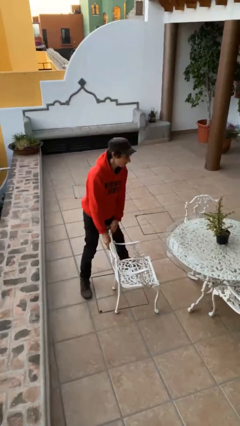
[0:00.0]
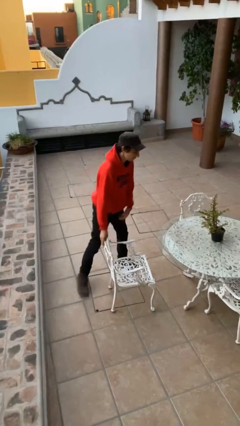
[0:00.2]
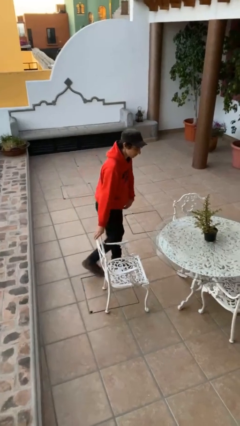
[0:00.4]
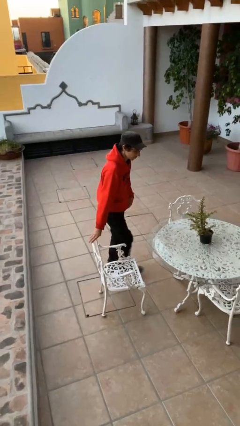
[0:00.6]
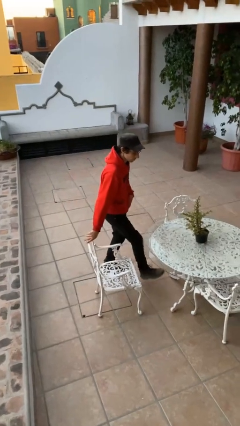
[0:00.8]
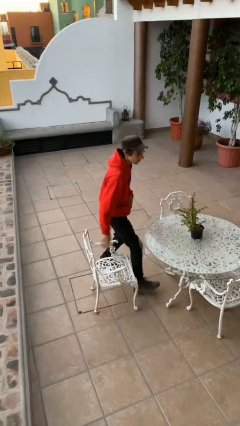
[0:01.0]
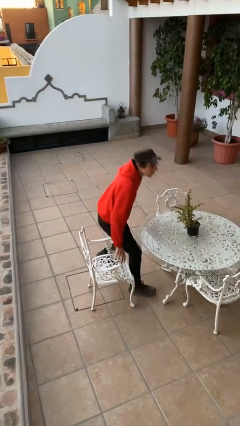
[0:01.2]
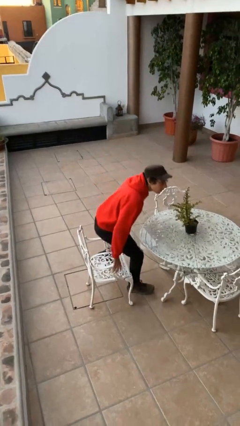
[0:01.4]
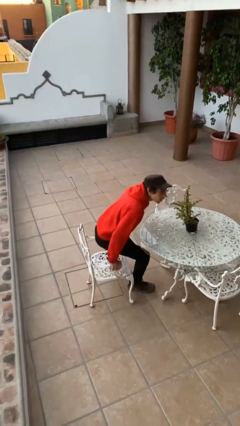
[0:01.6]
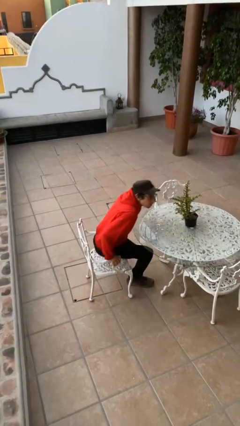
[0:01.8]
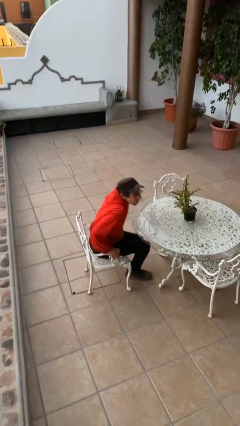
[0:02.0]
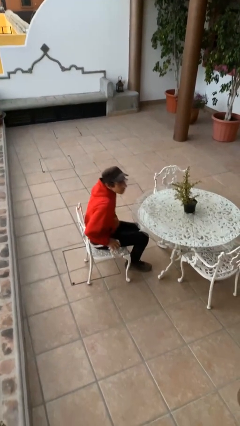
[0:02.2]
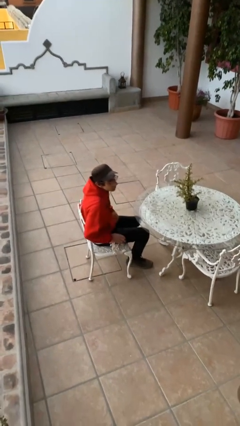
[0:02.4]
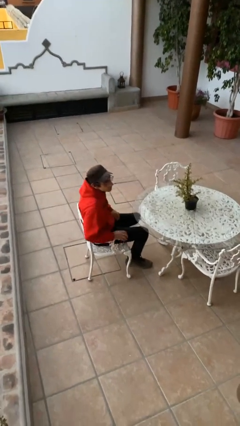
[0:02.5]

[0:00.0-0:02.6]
person sits down

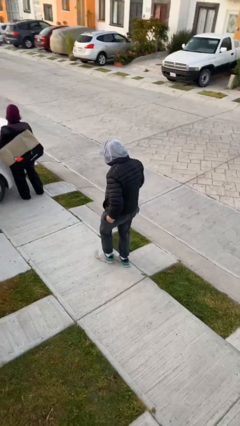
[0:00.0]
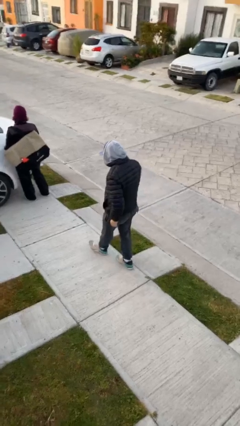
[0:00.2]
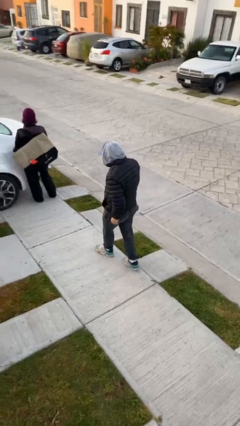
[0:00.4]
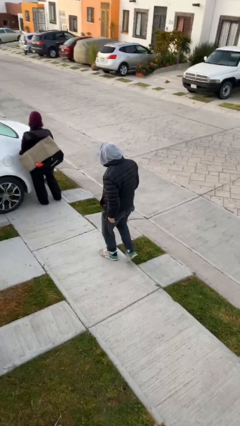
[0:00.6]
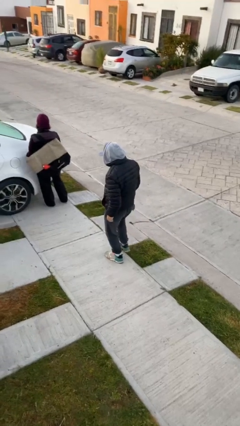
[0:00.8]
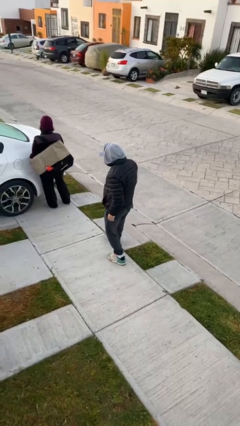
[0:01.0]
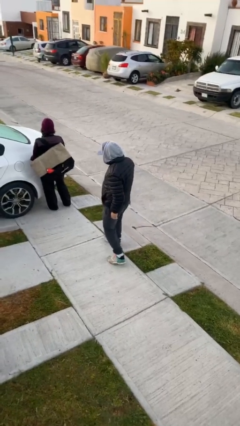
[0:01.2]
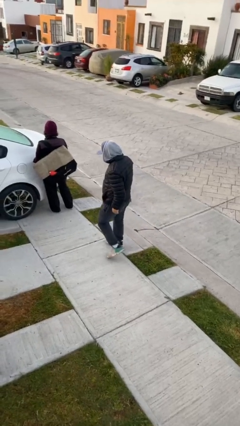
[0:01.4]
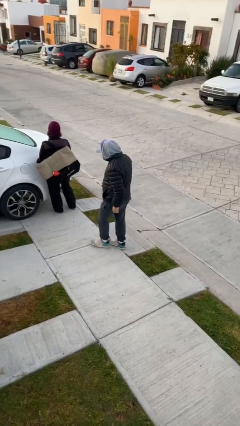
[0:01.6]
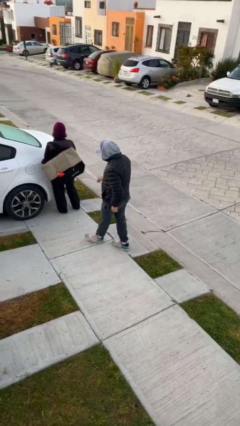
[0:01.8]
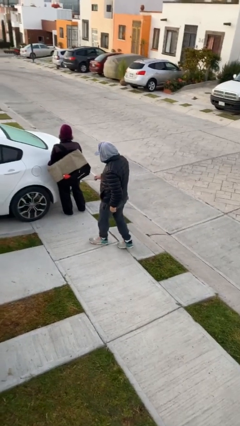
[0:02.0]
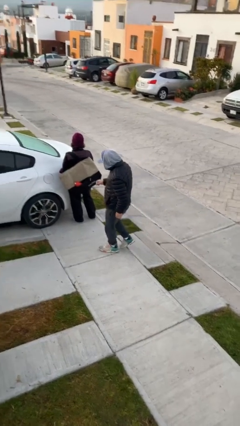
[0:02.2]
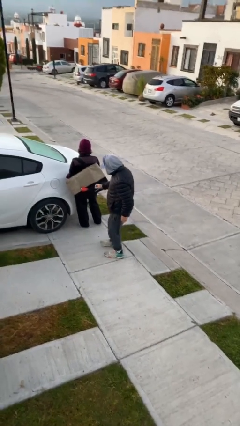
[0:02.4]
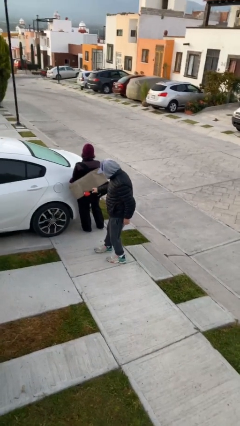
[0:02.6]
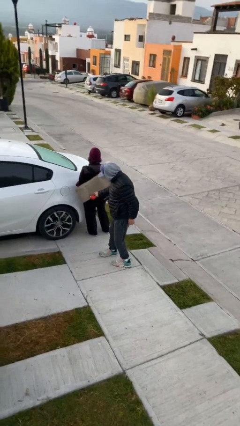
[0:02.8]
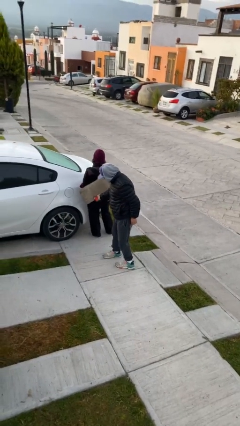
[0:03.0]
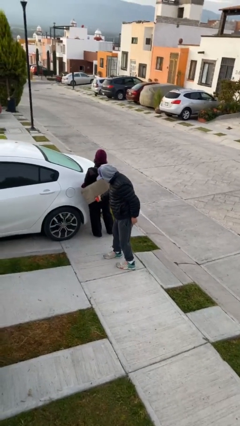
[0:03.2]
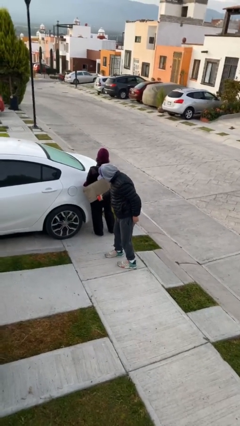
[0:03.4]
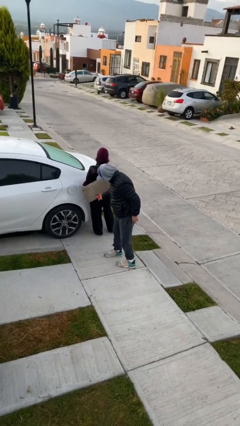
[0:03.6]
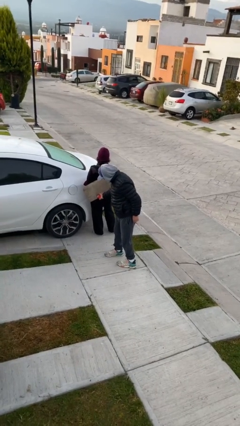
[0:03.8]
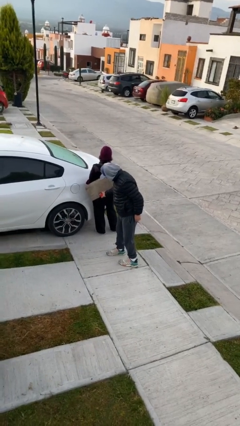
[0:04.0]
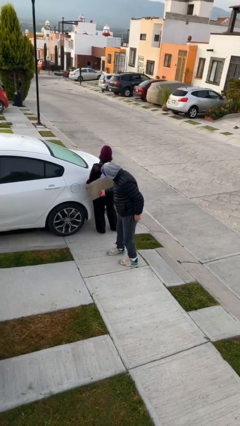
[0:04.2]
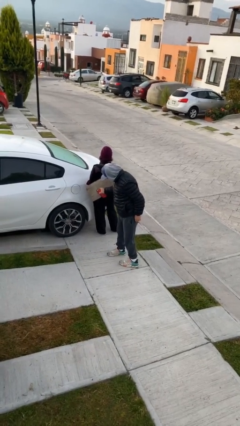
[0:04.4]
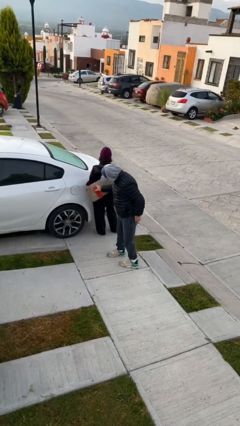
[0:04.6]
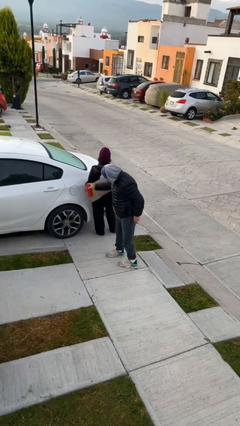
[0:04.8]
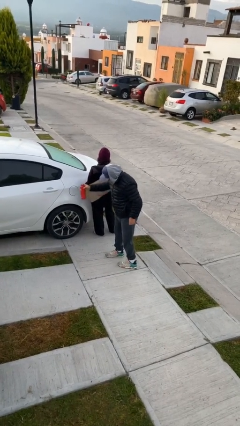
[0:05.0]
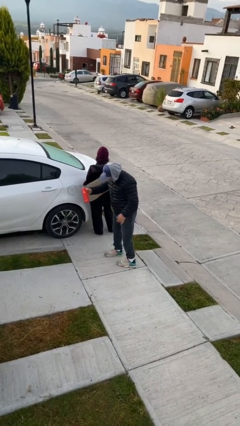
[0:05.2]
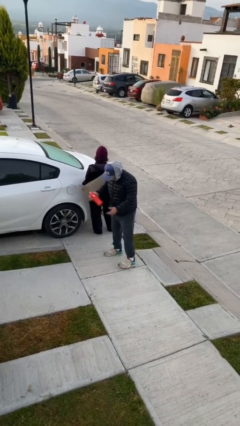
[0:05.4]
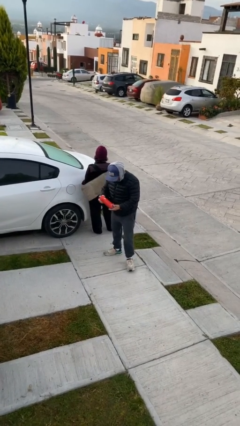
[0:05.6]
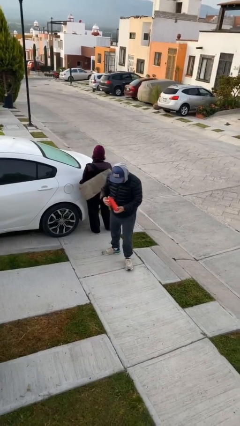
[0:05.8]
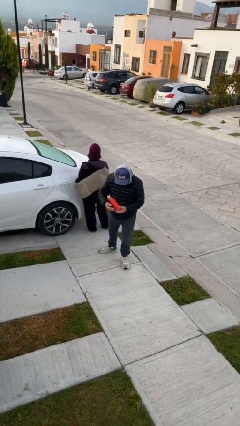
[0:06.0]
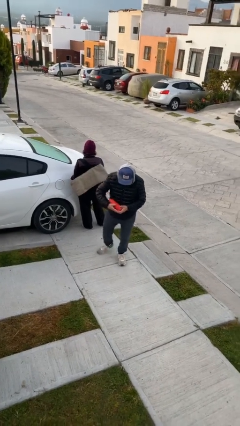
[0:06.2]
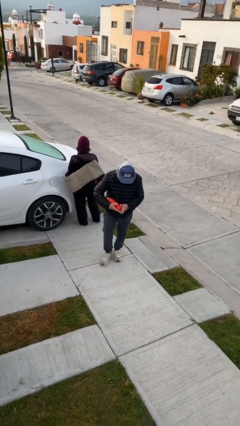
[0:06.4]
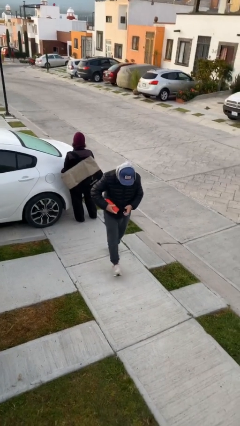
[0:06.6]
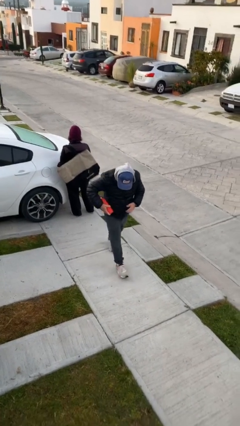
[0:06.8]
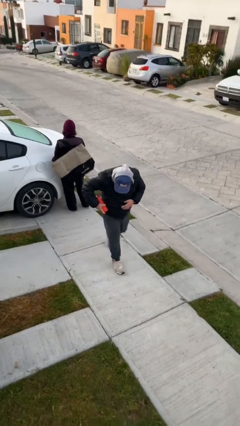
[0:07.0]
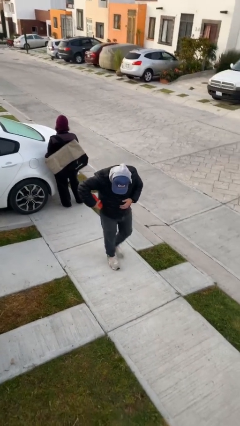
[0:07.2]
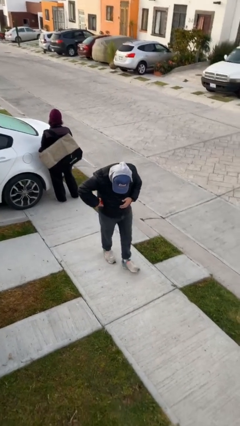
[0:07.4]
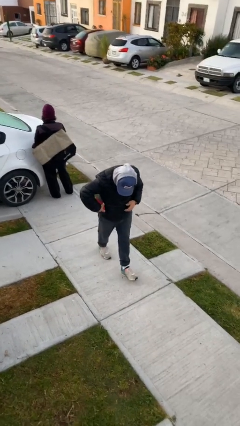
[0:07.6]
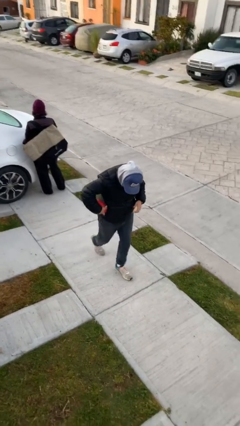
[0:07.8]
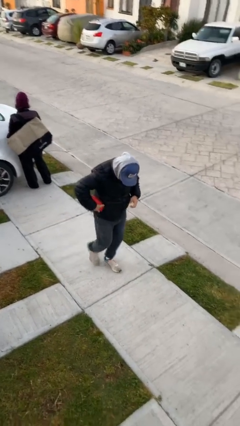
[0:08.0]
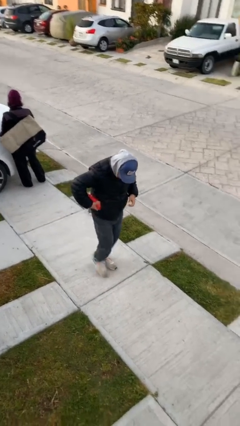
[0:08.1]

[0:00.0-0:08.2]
person steals object from person

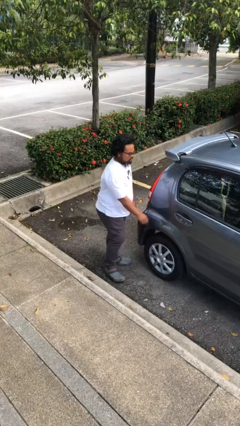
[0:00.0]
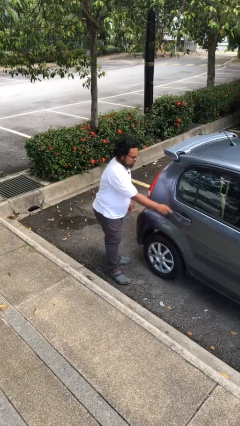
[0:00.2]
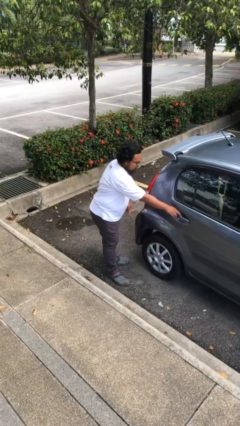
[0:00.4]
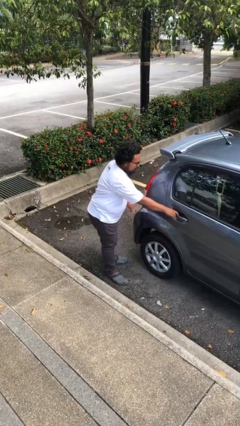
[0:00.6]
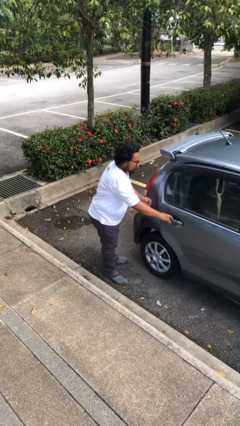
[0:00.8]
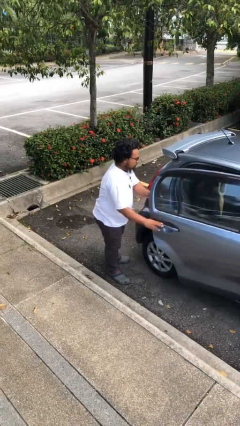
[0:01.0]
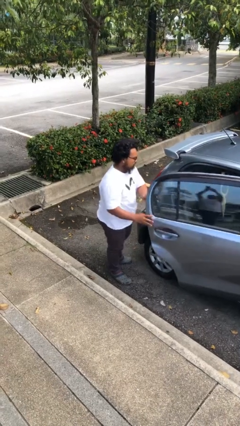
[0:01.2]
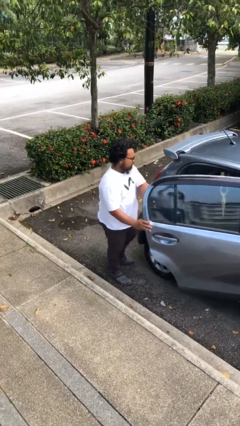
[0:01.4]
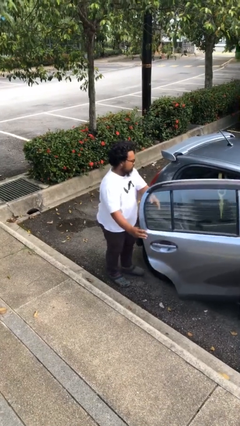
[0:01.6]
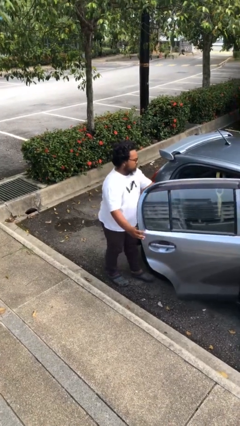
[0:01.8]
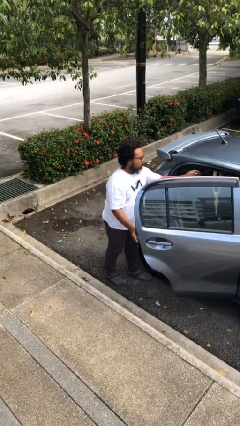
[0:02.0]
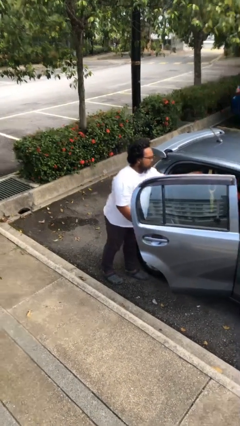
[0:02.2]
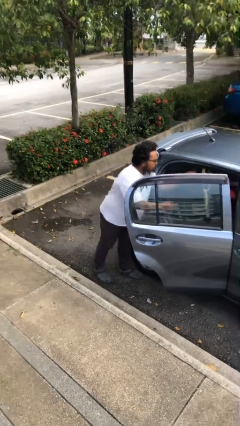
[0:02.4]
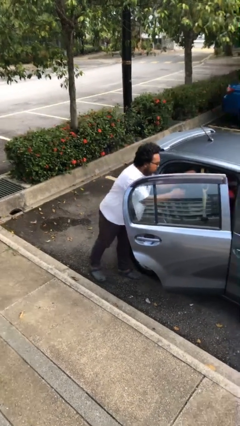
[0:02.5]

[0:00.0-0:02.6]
person opens car door

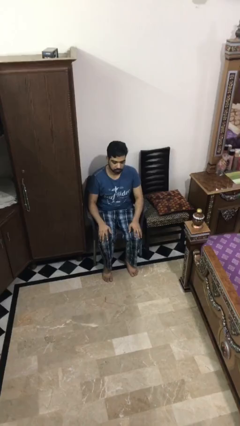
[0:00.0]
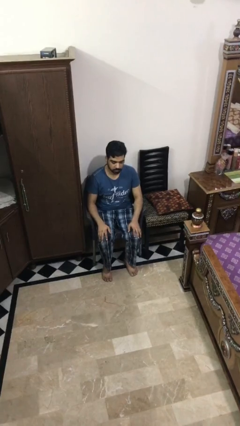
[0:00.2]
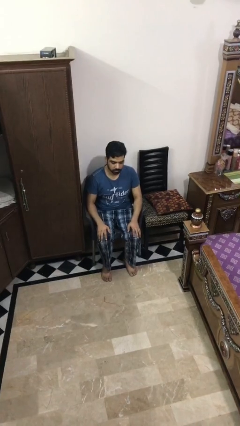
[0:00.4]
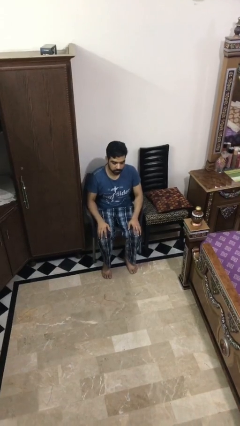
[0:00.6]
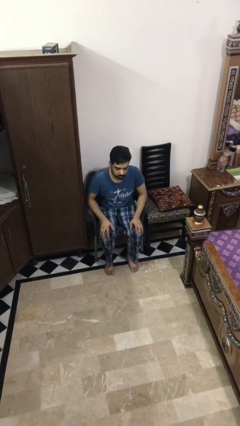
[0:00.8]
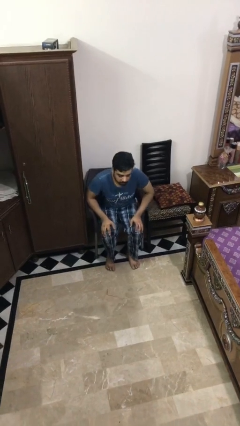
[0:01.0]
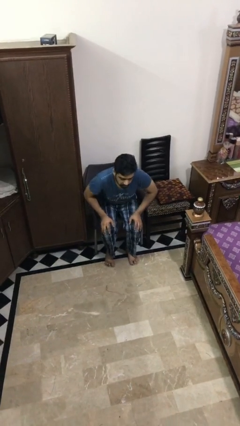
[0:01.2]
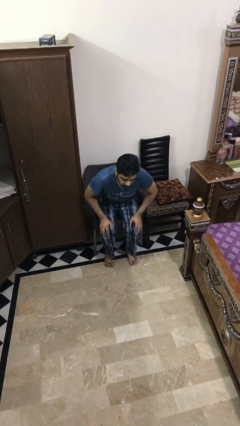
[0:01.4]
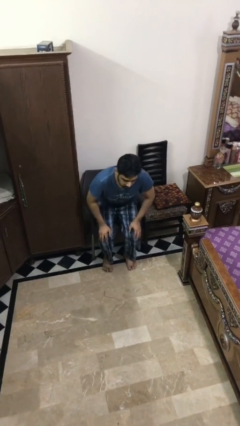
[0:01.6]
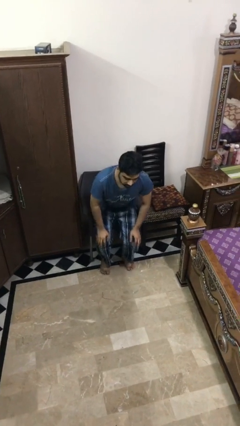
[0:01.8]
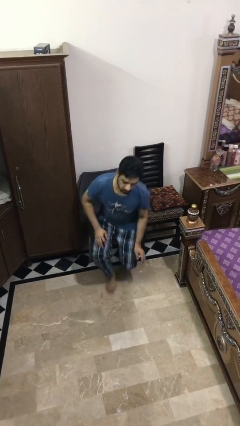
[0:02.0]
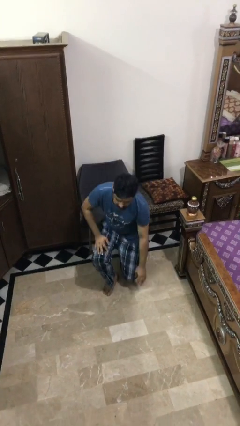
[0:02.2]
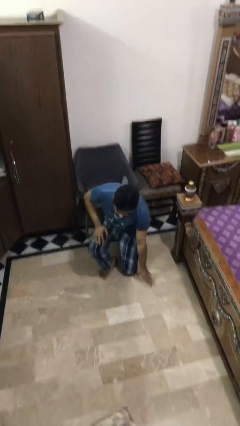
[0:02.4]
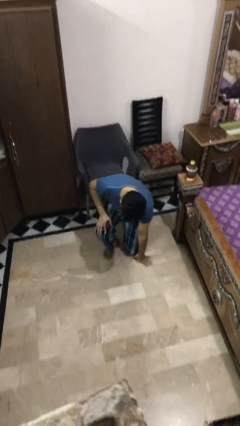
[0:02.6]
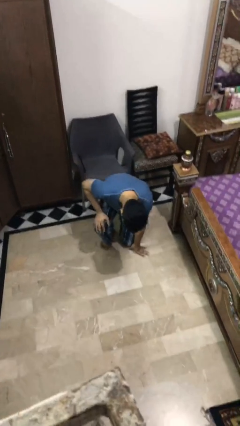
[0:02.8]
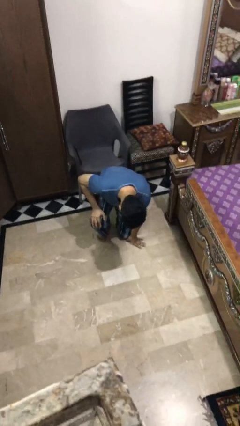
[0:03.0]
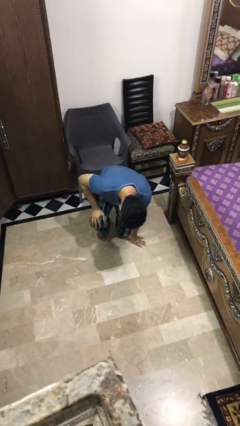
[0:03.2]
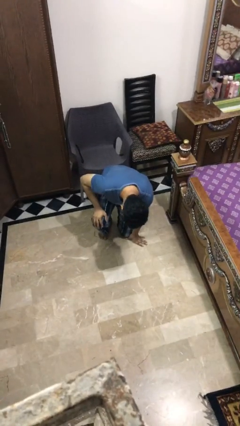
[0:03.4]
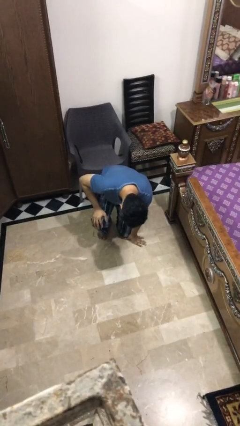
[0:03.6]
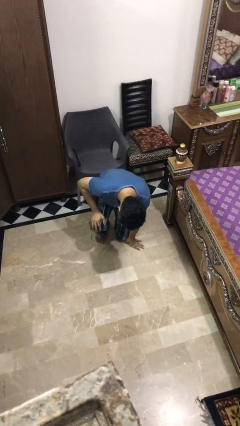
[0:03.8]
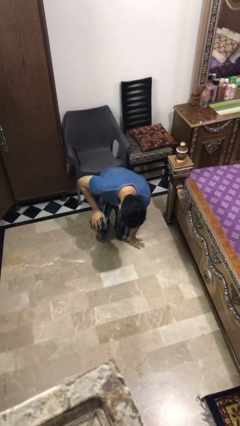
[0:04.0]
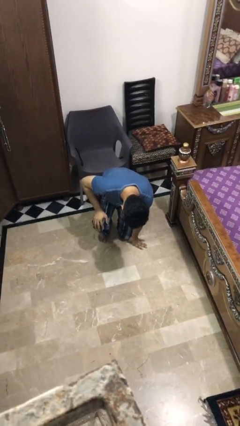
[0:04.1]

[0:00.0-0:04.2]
person falls from chair

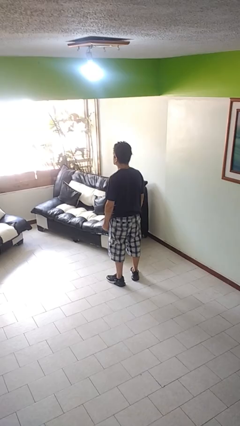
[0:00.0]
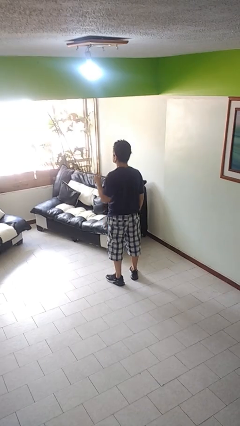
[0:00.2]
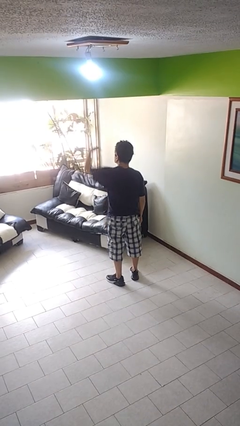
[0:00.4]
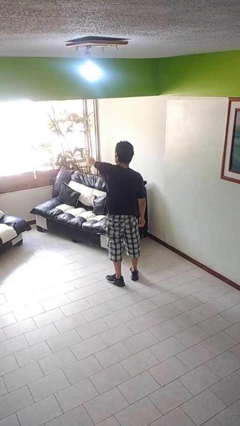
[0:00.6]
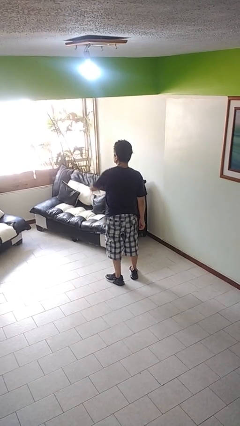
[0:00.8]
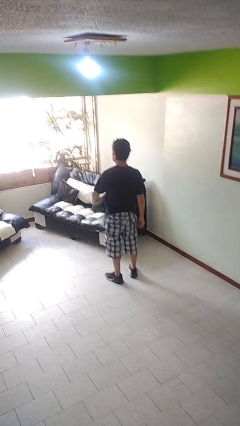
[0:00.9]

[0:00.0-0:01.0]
person punches
